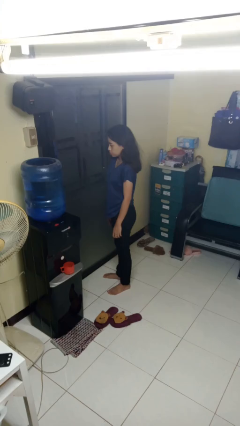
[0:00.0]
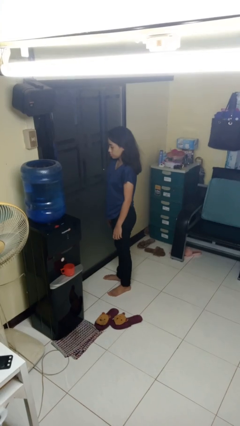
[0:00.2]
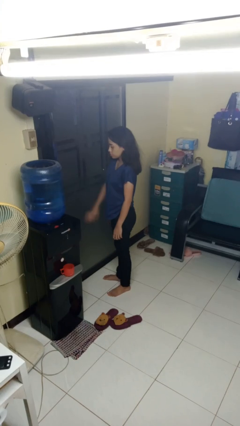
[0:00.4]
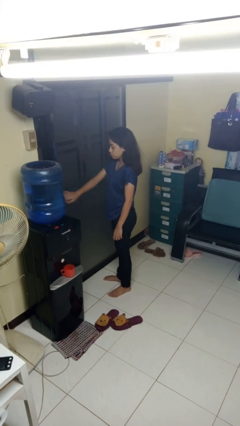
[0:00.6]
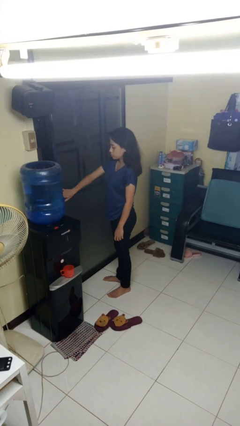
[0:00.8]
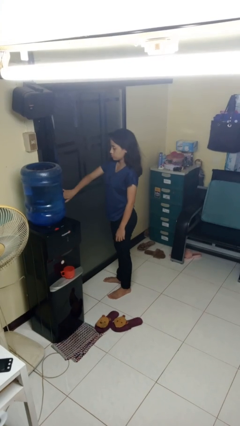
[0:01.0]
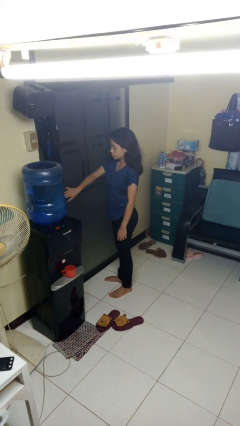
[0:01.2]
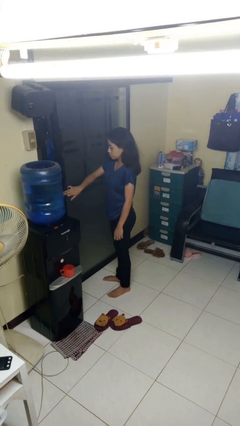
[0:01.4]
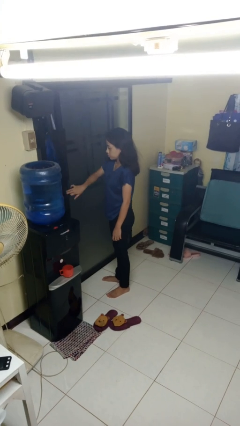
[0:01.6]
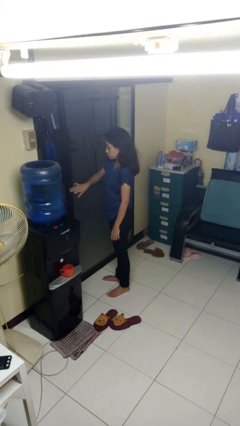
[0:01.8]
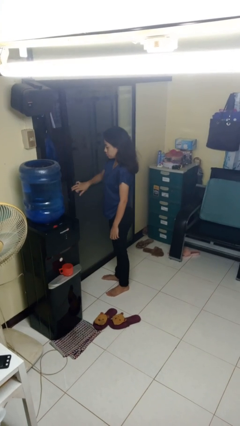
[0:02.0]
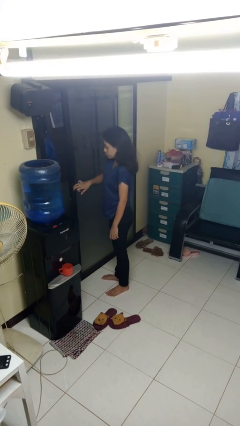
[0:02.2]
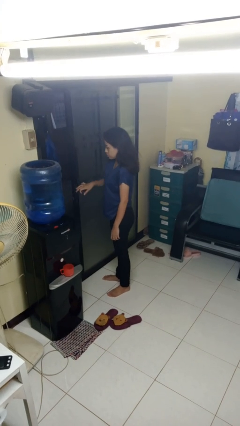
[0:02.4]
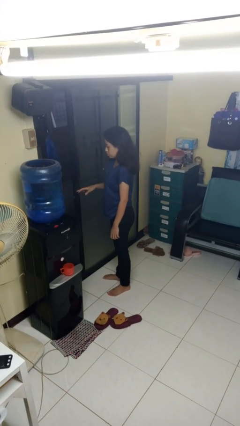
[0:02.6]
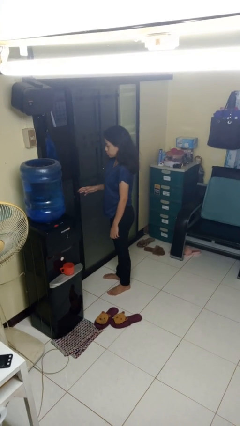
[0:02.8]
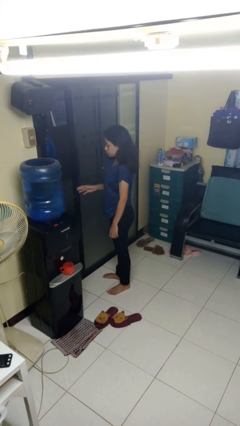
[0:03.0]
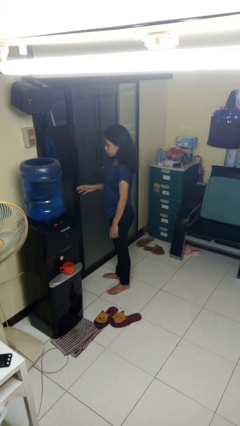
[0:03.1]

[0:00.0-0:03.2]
person opens sliding door

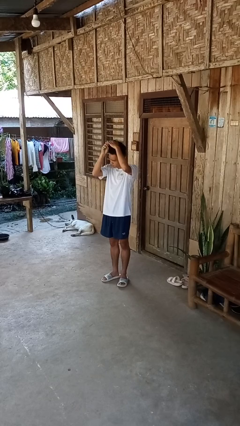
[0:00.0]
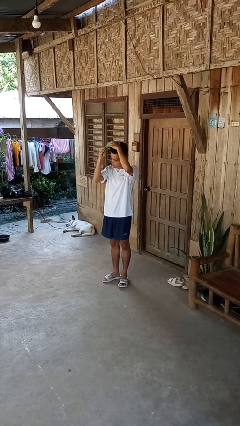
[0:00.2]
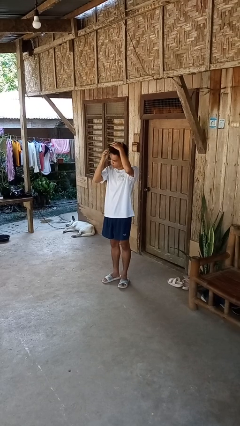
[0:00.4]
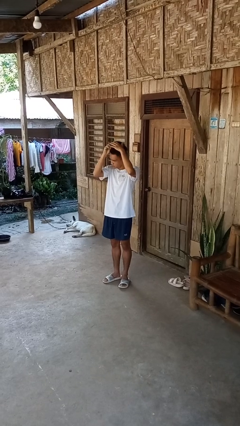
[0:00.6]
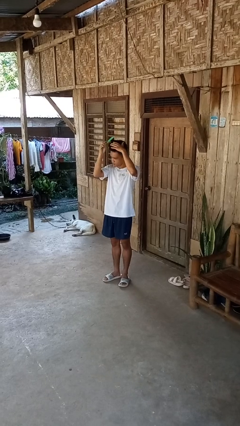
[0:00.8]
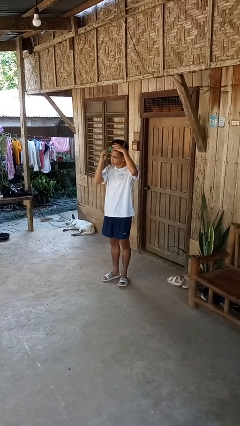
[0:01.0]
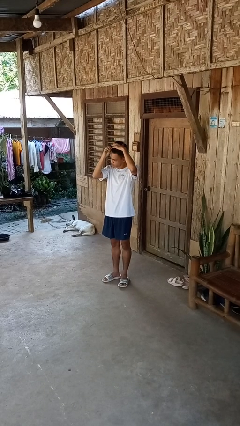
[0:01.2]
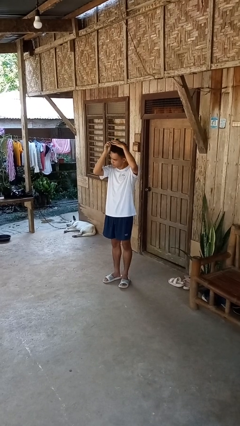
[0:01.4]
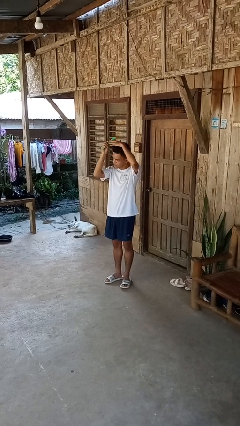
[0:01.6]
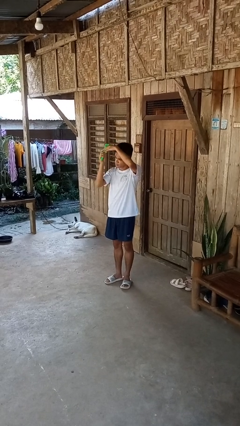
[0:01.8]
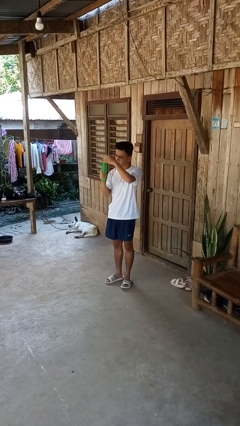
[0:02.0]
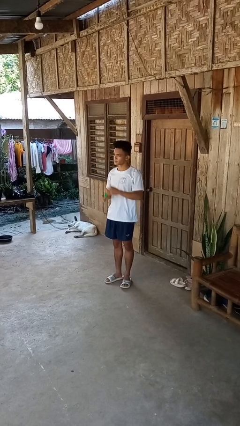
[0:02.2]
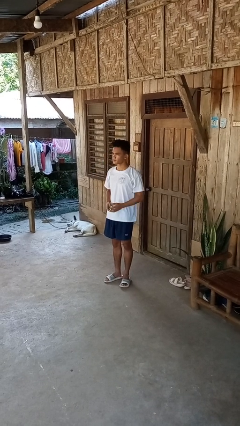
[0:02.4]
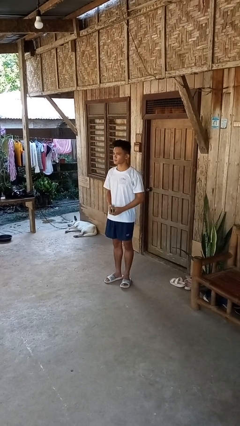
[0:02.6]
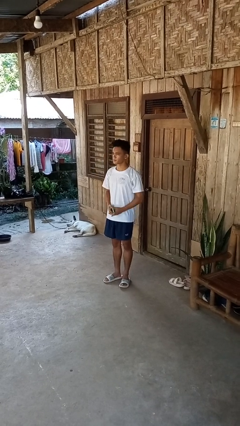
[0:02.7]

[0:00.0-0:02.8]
person brushes hair

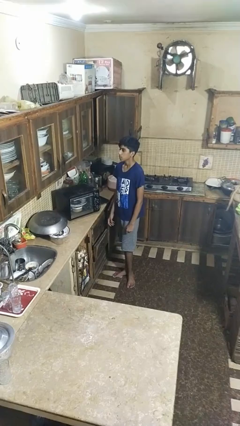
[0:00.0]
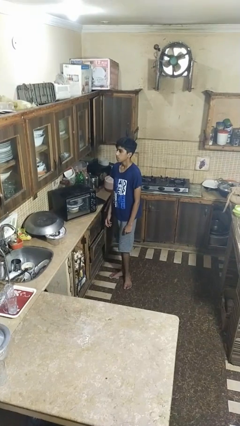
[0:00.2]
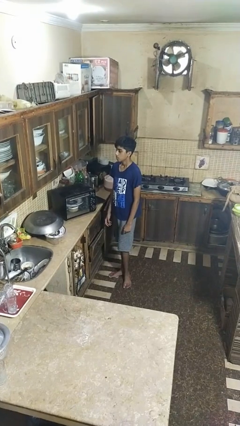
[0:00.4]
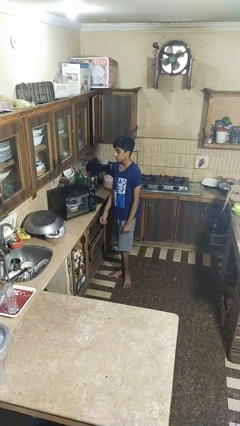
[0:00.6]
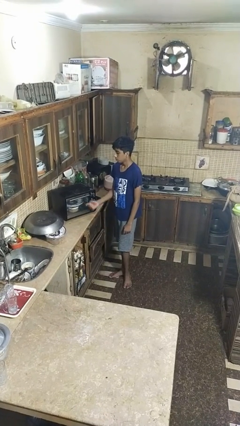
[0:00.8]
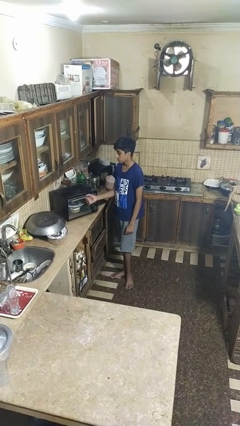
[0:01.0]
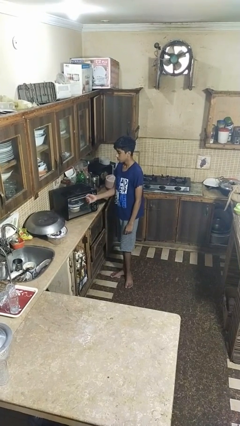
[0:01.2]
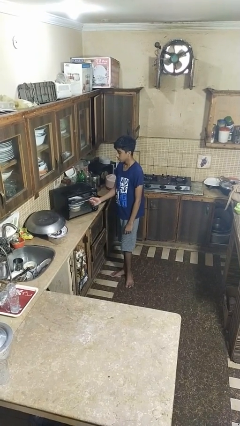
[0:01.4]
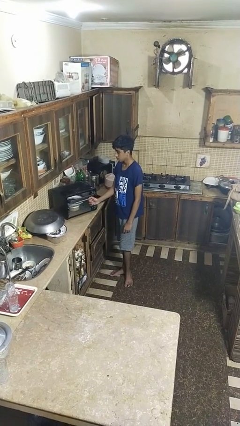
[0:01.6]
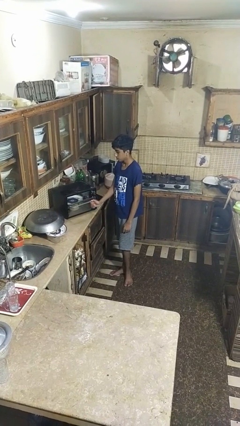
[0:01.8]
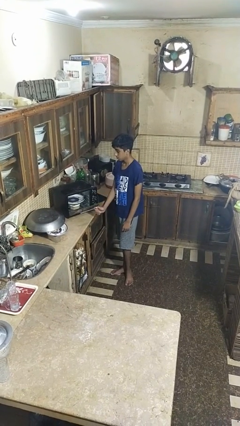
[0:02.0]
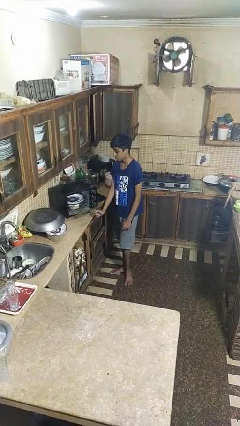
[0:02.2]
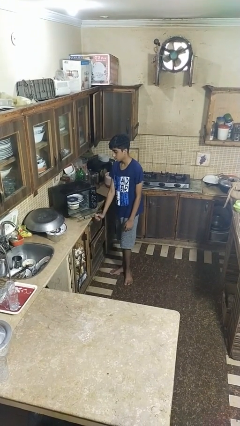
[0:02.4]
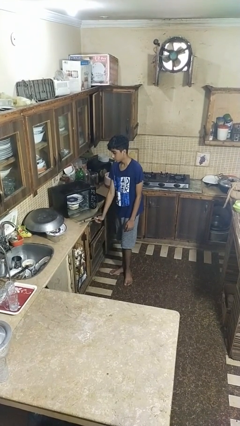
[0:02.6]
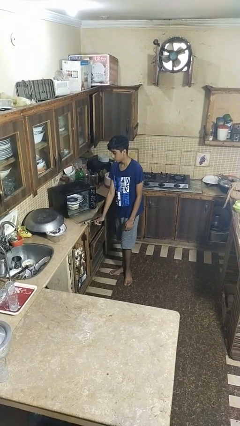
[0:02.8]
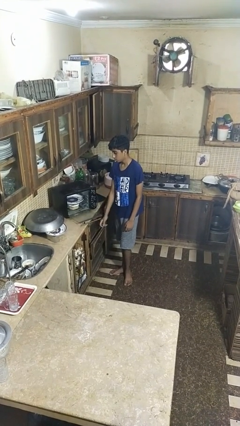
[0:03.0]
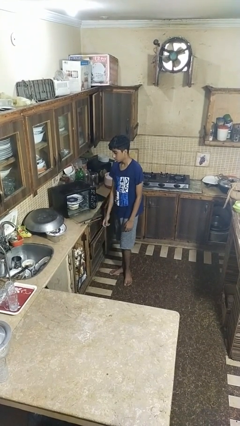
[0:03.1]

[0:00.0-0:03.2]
person opens dishwasher

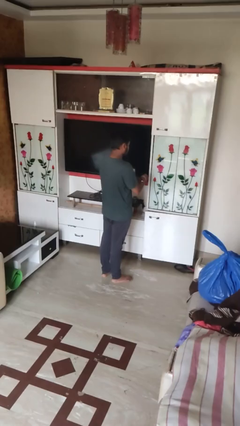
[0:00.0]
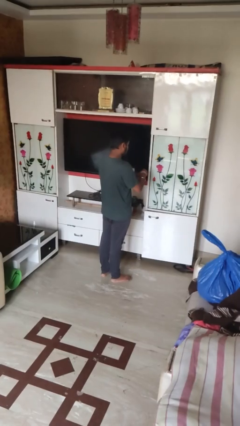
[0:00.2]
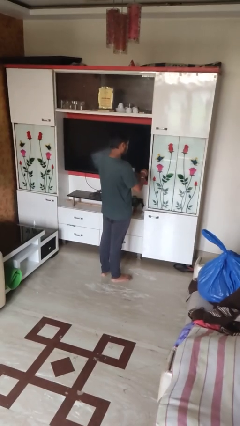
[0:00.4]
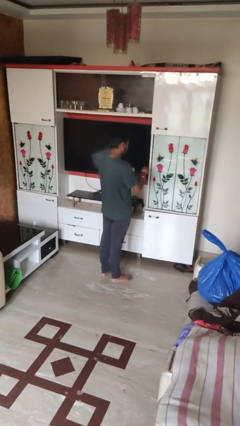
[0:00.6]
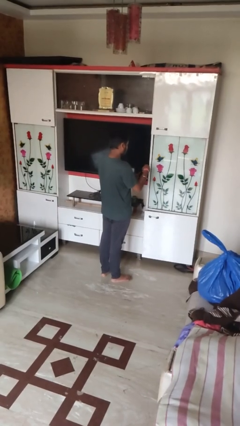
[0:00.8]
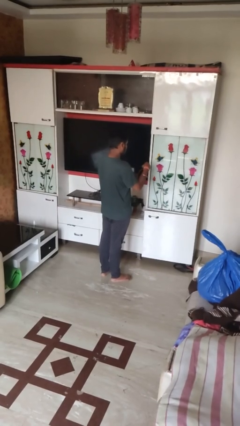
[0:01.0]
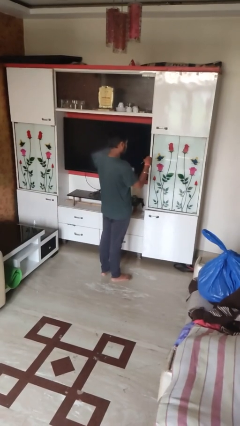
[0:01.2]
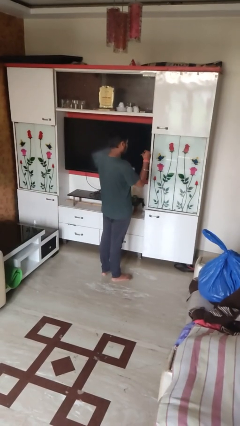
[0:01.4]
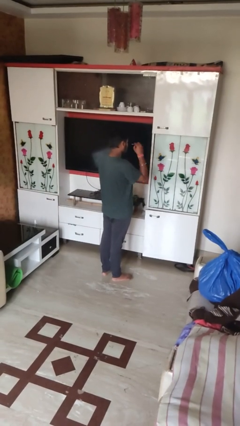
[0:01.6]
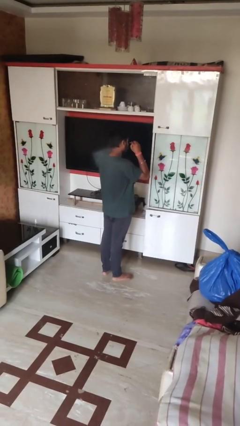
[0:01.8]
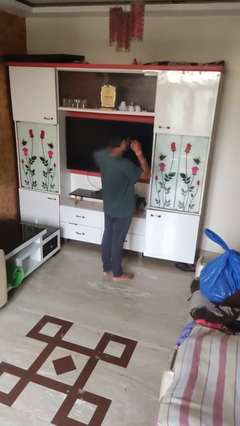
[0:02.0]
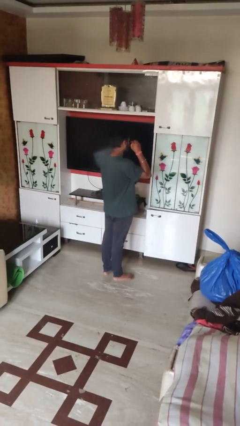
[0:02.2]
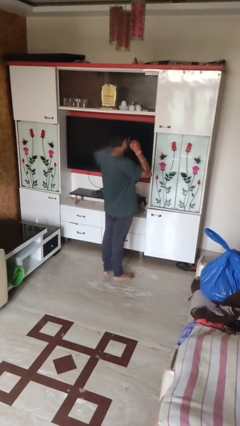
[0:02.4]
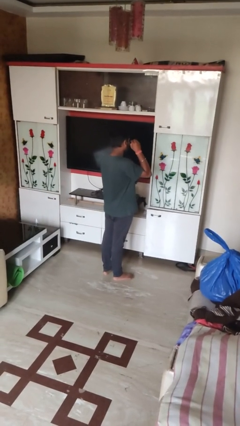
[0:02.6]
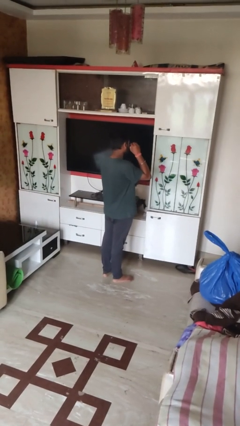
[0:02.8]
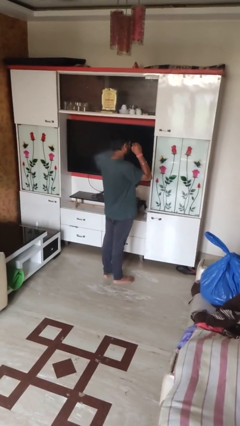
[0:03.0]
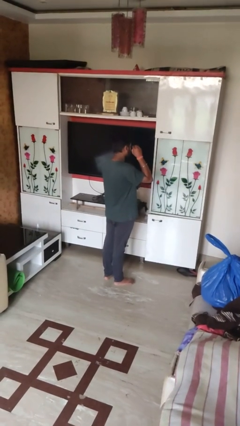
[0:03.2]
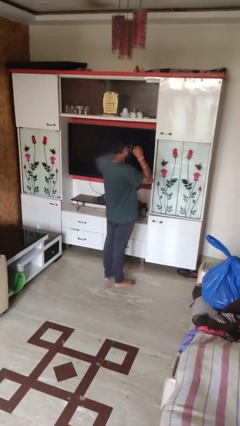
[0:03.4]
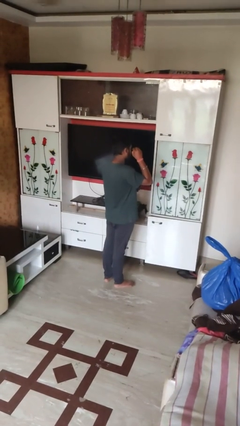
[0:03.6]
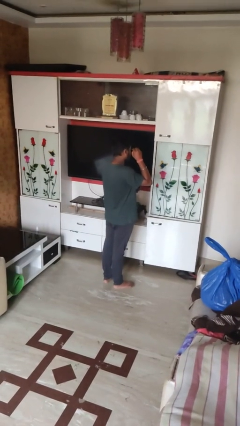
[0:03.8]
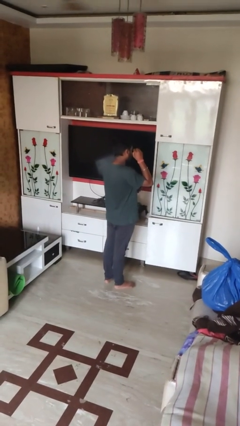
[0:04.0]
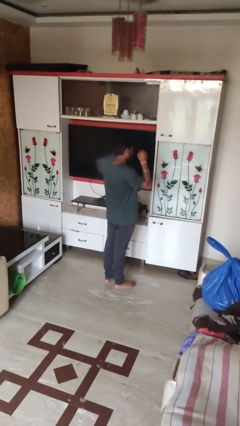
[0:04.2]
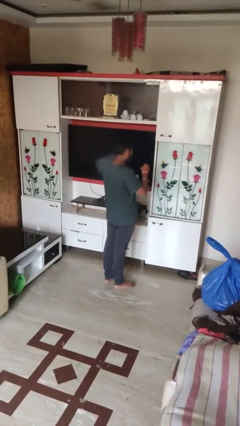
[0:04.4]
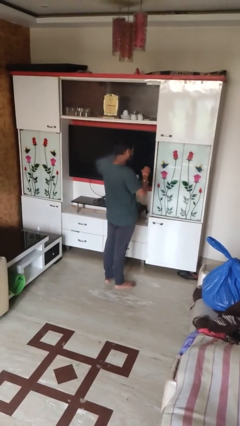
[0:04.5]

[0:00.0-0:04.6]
person applies eye makeup

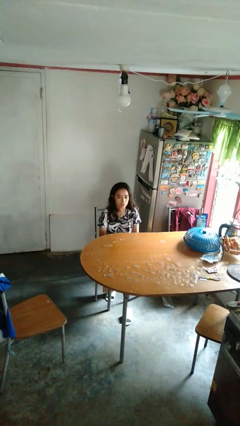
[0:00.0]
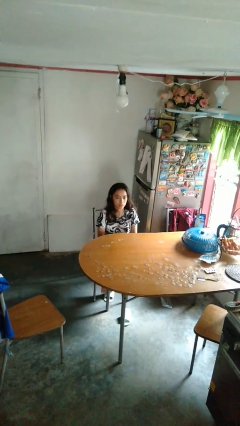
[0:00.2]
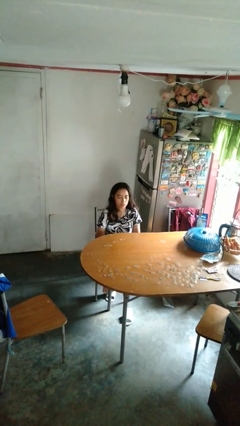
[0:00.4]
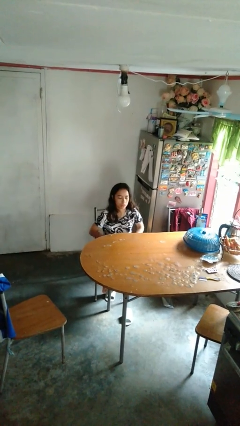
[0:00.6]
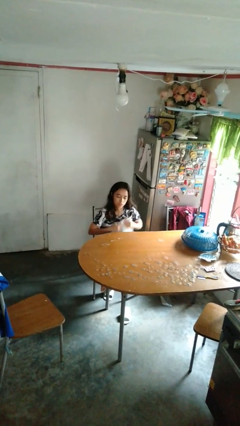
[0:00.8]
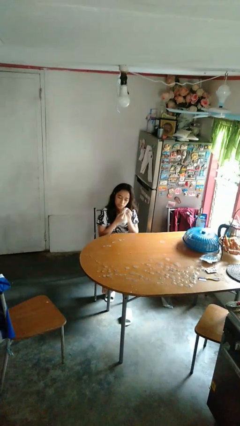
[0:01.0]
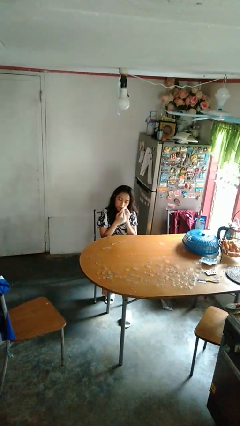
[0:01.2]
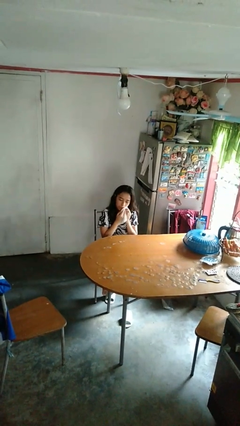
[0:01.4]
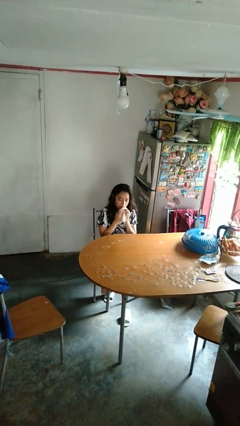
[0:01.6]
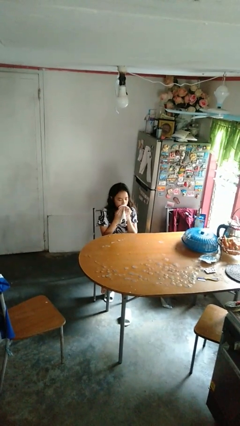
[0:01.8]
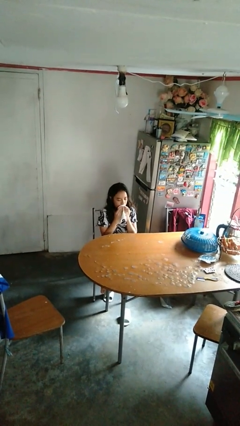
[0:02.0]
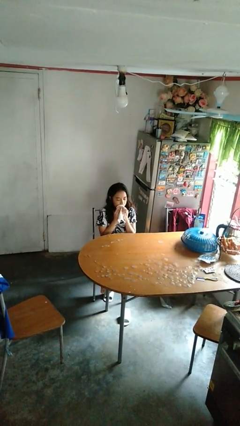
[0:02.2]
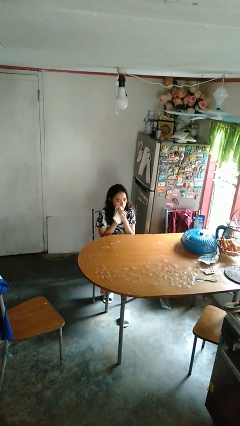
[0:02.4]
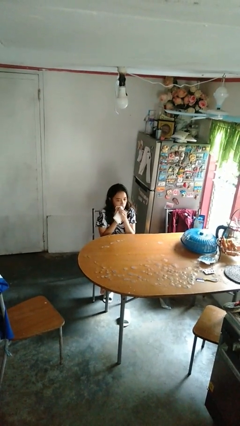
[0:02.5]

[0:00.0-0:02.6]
person wipes mouth with napkin

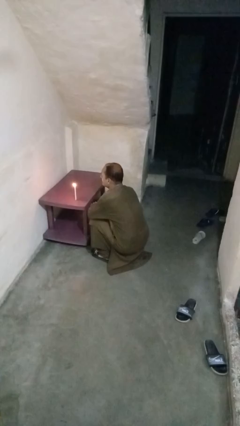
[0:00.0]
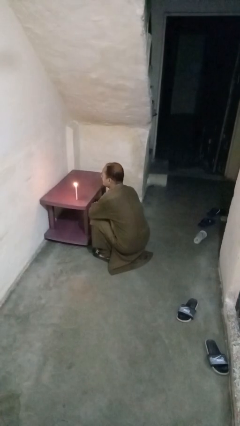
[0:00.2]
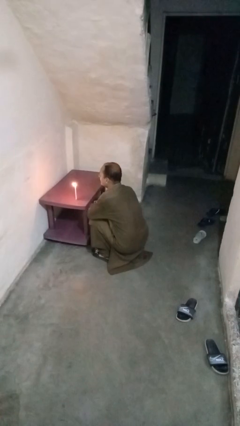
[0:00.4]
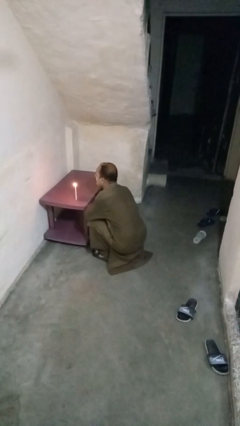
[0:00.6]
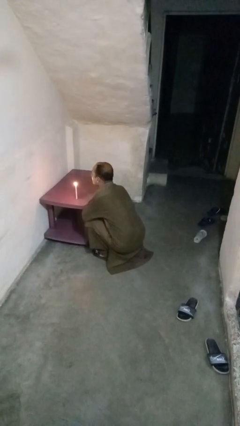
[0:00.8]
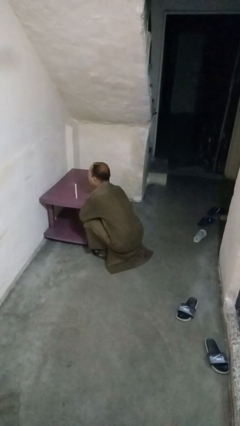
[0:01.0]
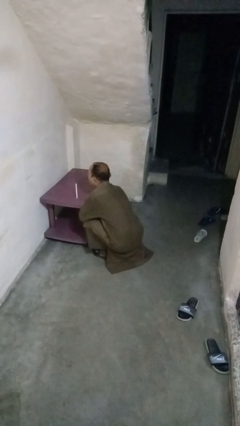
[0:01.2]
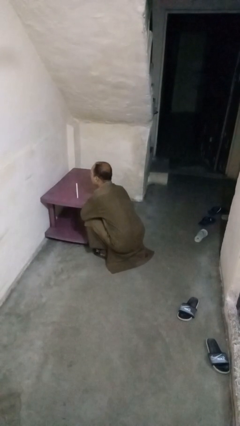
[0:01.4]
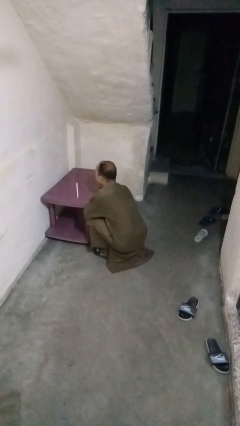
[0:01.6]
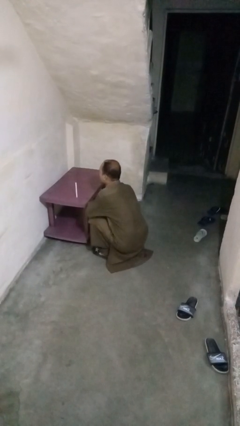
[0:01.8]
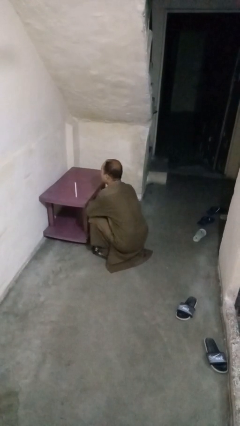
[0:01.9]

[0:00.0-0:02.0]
person extinguishes candle
